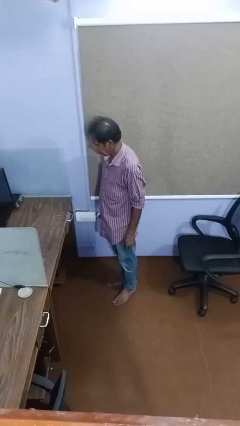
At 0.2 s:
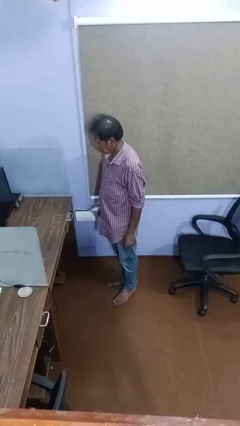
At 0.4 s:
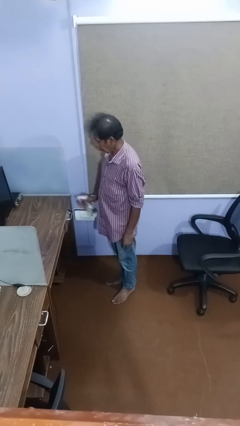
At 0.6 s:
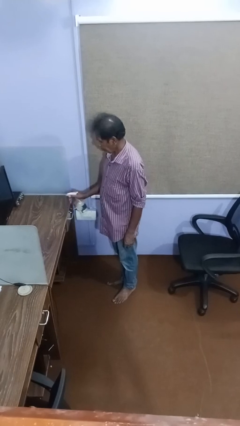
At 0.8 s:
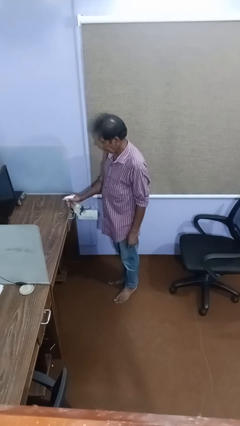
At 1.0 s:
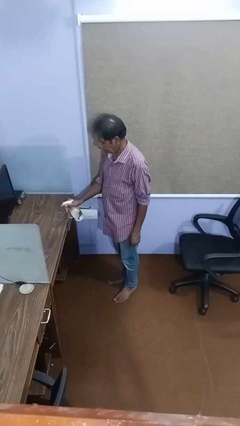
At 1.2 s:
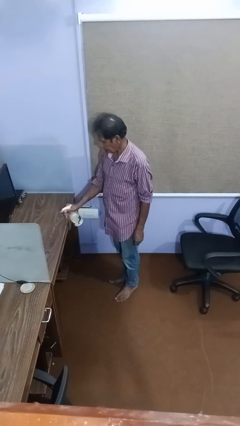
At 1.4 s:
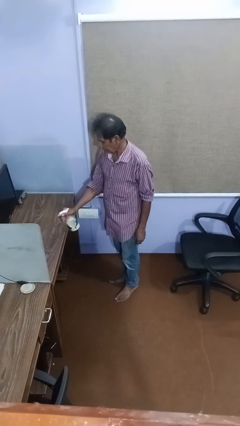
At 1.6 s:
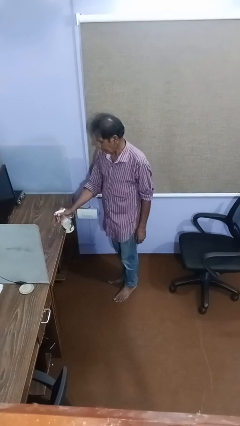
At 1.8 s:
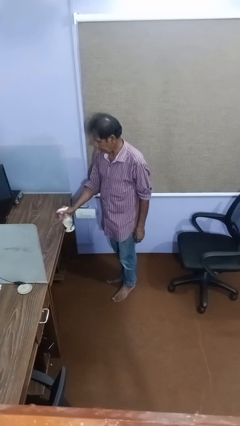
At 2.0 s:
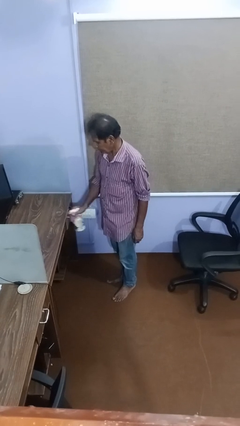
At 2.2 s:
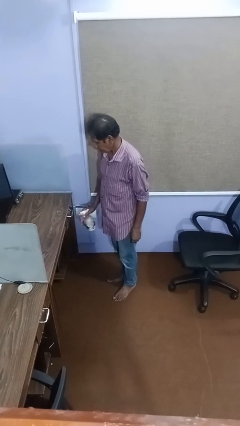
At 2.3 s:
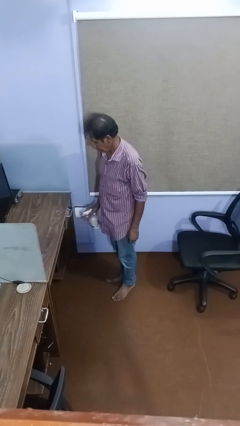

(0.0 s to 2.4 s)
person sprays from bottle

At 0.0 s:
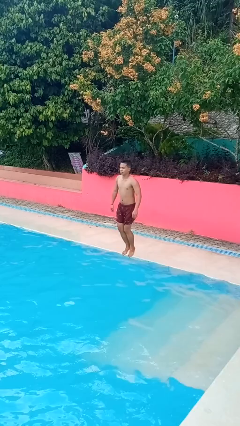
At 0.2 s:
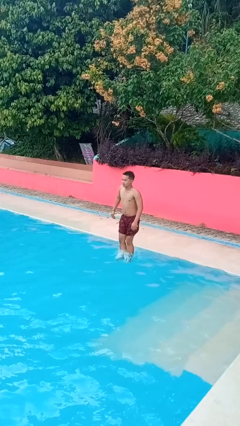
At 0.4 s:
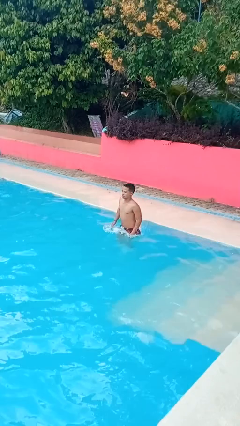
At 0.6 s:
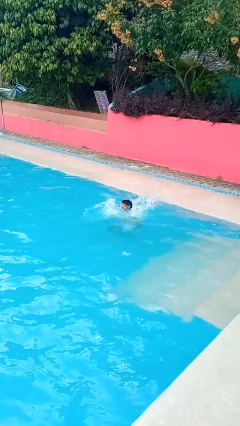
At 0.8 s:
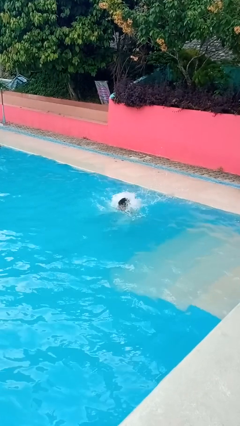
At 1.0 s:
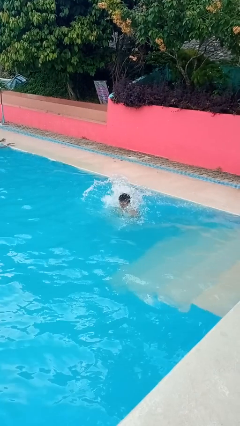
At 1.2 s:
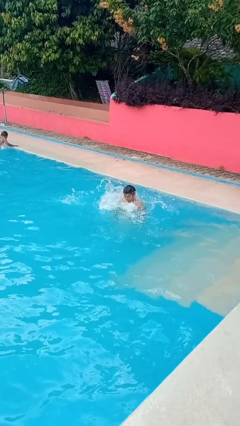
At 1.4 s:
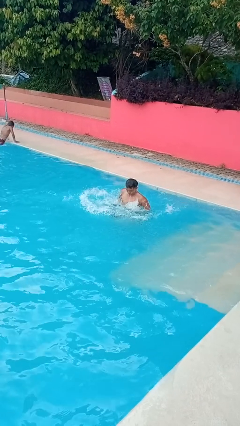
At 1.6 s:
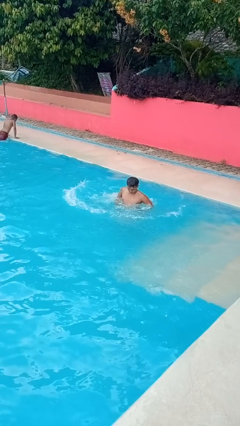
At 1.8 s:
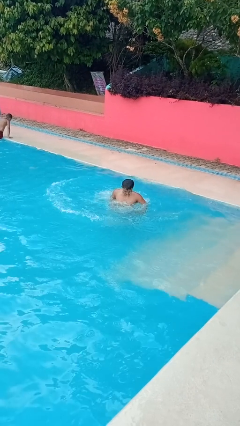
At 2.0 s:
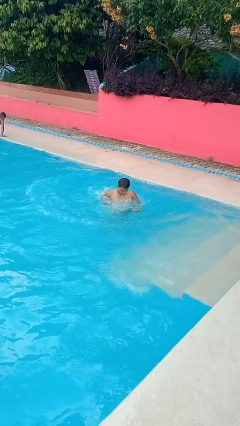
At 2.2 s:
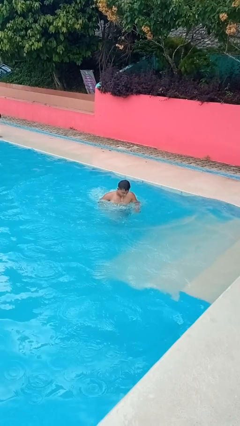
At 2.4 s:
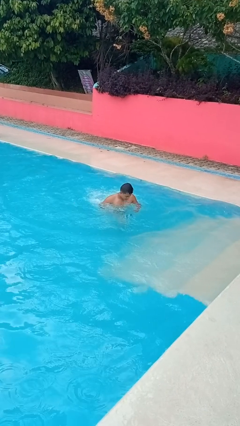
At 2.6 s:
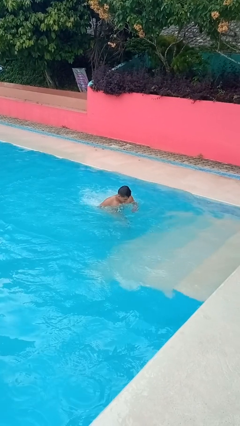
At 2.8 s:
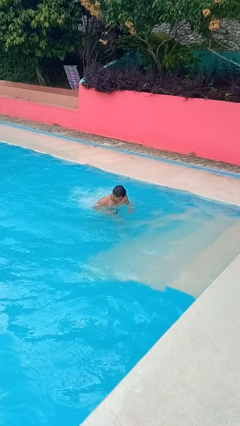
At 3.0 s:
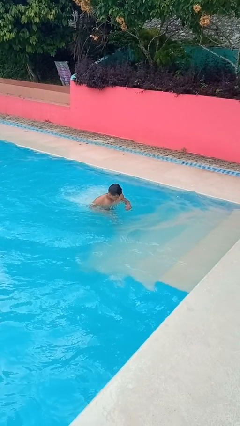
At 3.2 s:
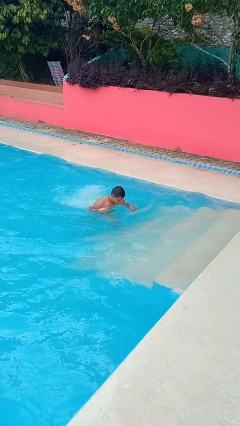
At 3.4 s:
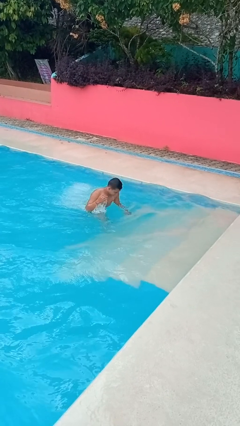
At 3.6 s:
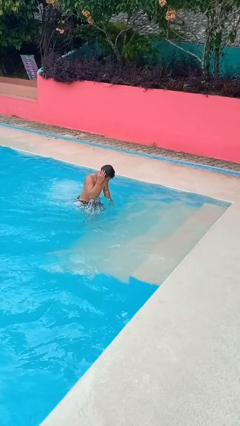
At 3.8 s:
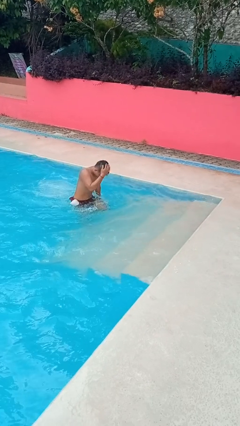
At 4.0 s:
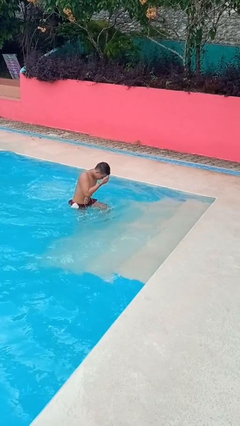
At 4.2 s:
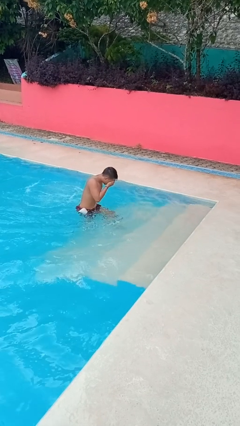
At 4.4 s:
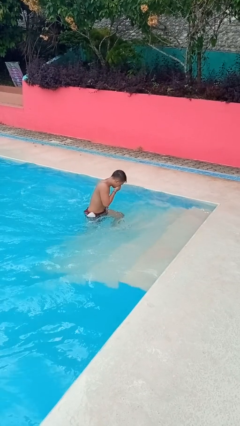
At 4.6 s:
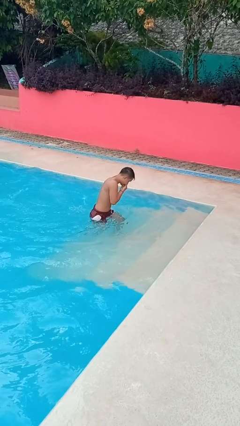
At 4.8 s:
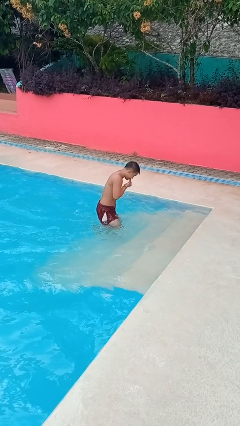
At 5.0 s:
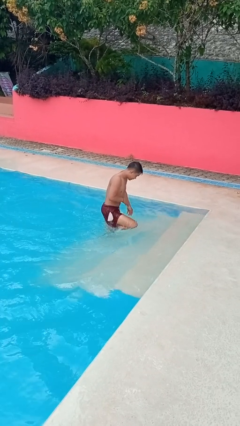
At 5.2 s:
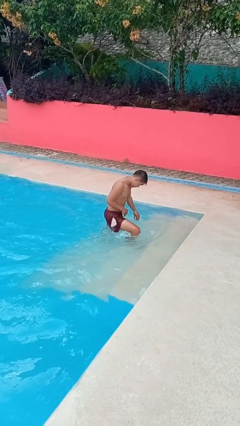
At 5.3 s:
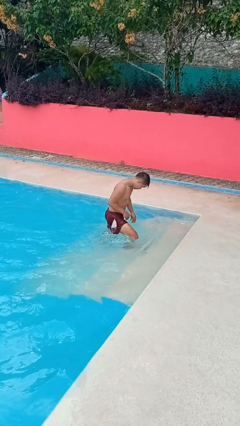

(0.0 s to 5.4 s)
person jumps into pool

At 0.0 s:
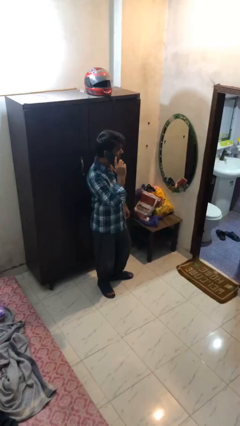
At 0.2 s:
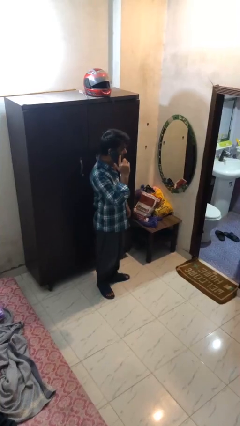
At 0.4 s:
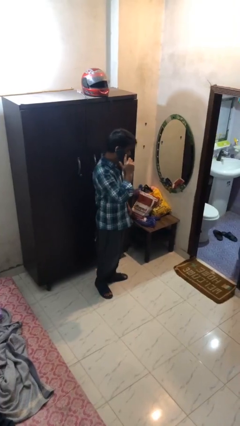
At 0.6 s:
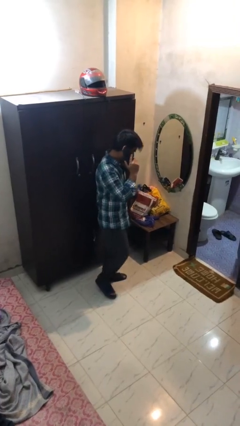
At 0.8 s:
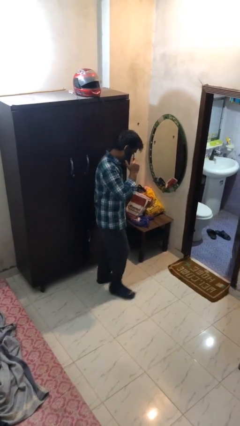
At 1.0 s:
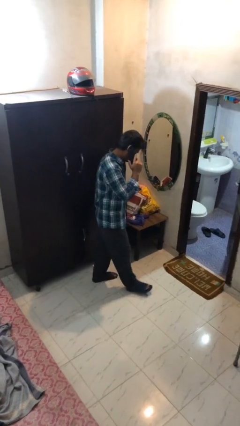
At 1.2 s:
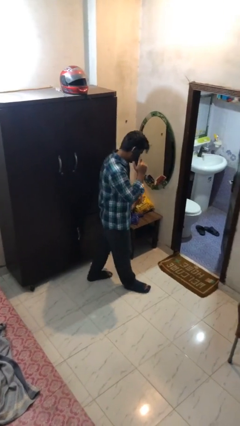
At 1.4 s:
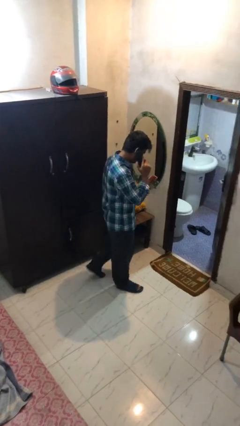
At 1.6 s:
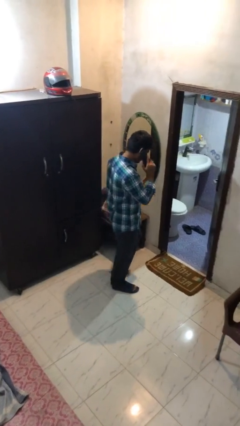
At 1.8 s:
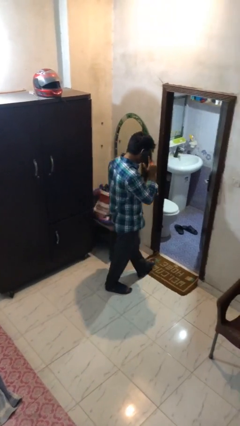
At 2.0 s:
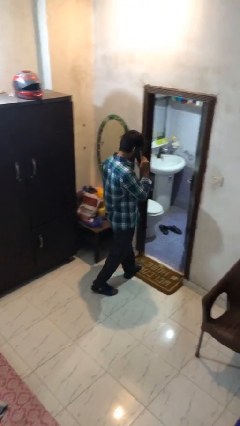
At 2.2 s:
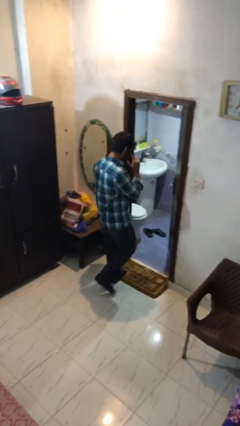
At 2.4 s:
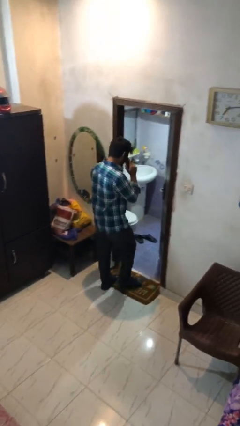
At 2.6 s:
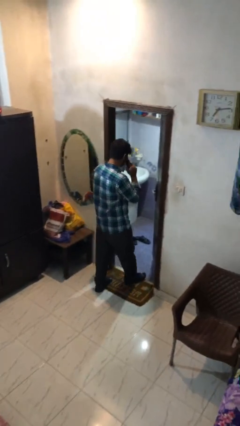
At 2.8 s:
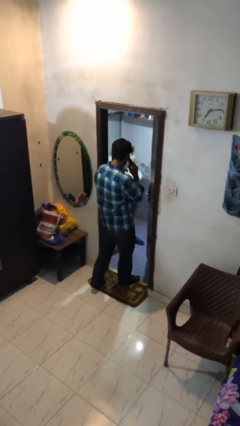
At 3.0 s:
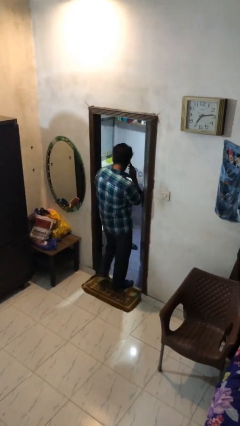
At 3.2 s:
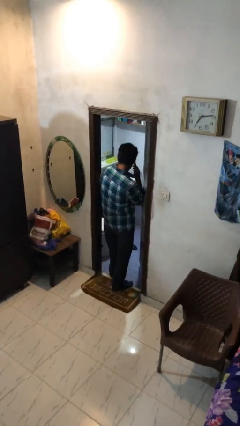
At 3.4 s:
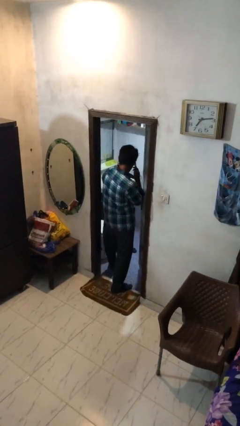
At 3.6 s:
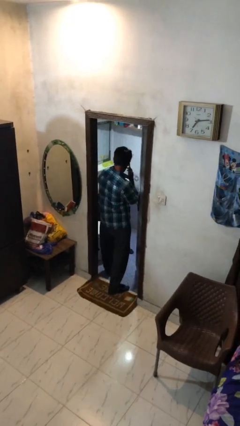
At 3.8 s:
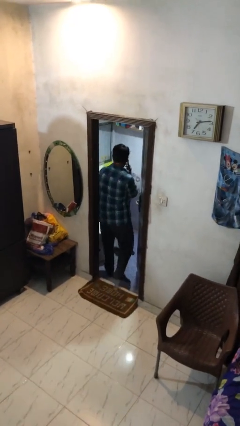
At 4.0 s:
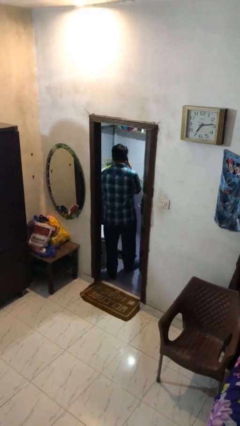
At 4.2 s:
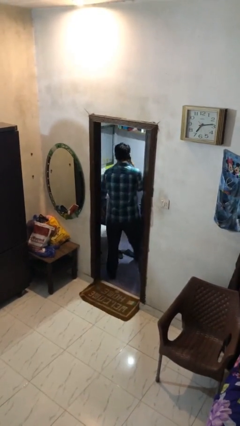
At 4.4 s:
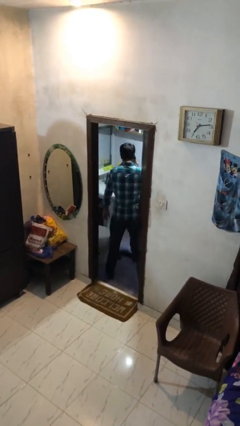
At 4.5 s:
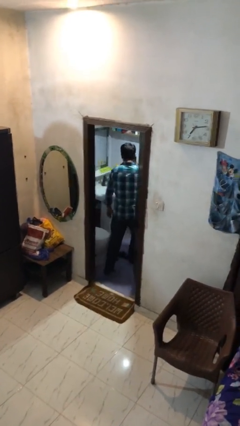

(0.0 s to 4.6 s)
person exits scene through structure

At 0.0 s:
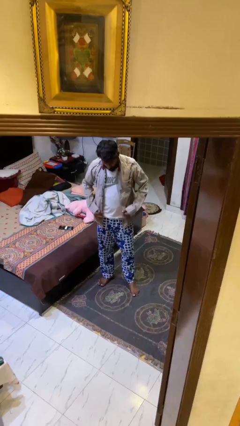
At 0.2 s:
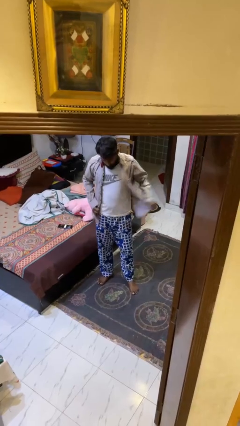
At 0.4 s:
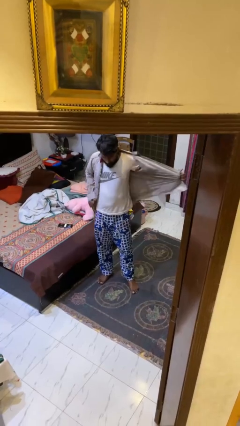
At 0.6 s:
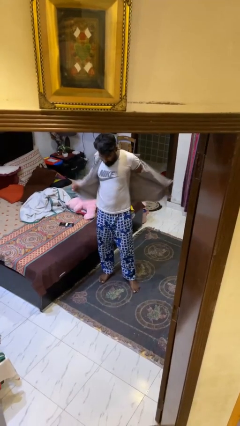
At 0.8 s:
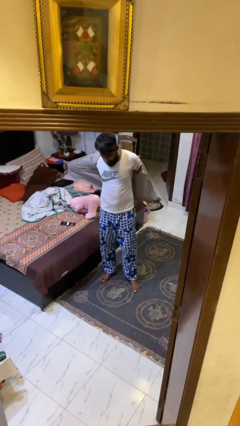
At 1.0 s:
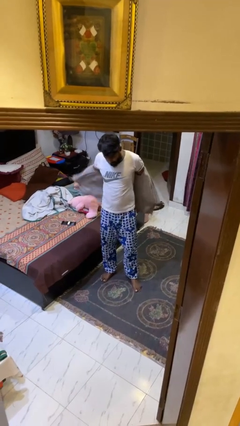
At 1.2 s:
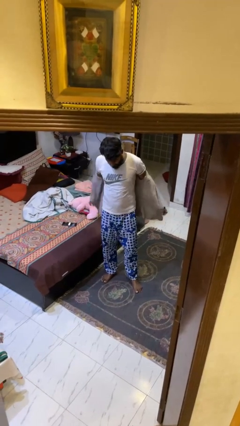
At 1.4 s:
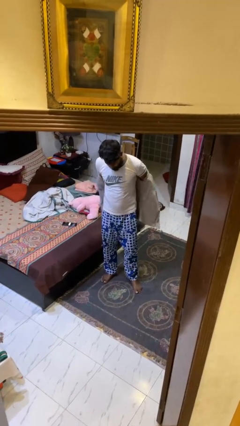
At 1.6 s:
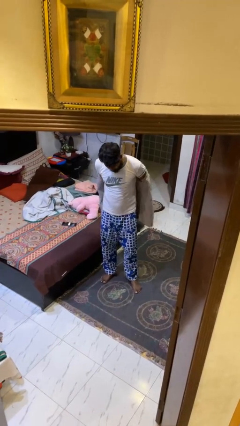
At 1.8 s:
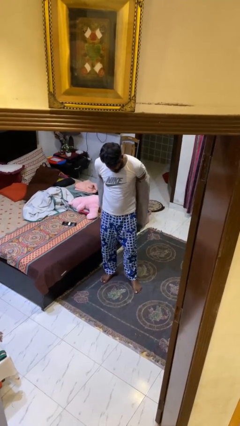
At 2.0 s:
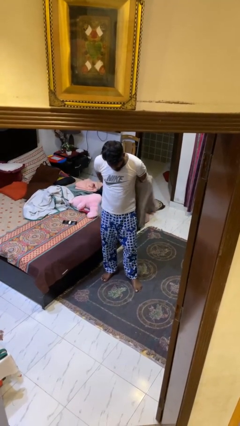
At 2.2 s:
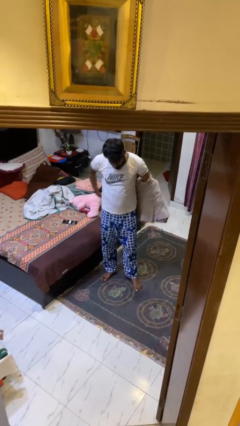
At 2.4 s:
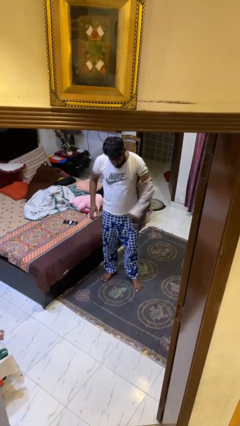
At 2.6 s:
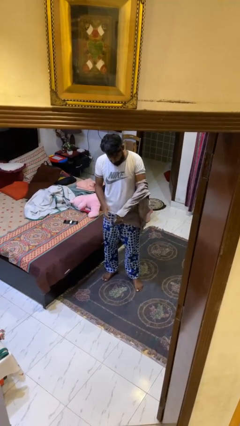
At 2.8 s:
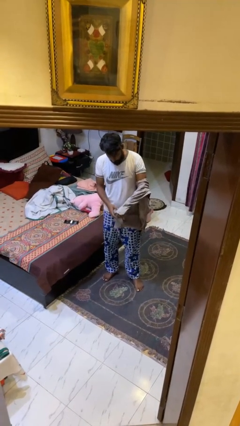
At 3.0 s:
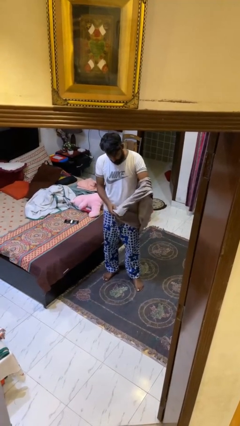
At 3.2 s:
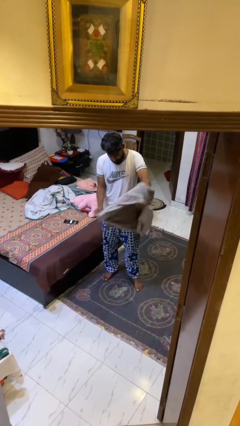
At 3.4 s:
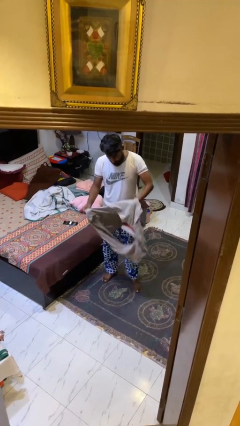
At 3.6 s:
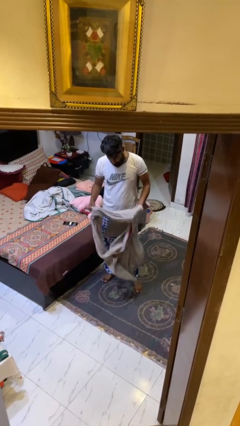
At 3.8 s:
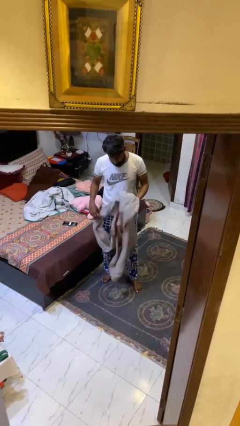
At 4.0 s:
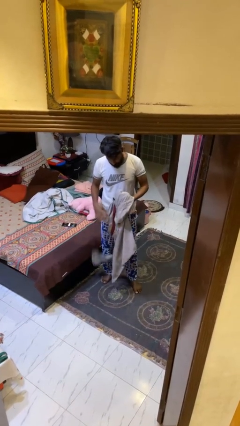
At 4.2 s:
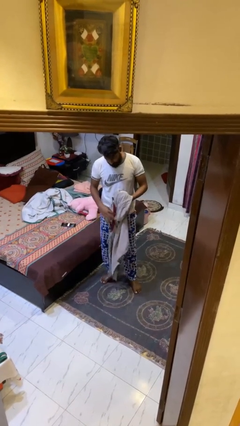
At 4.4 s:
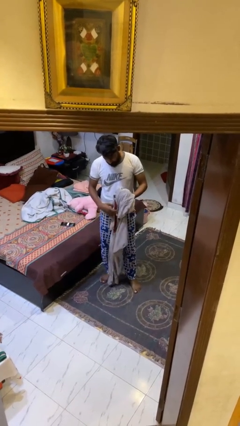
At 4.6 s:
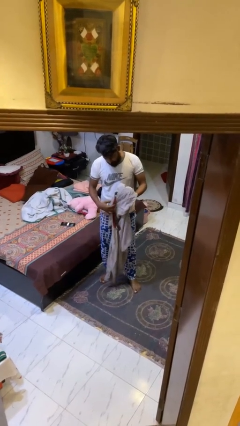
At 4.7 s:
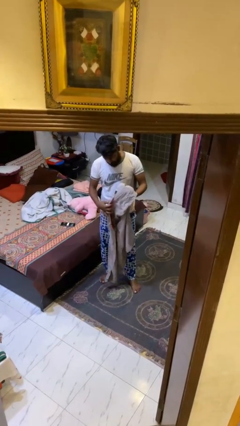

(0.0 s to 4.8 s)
person takes off shirt

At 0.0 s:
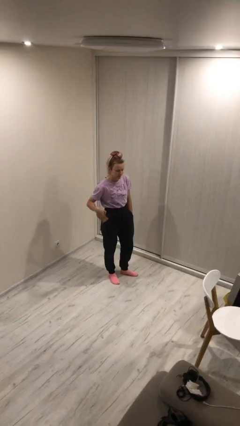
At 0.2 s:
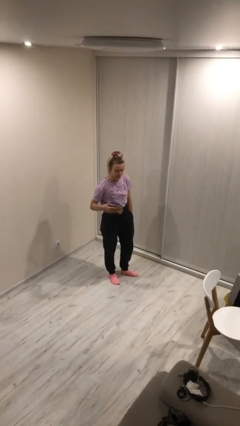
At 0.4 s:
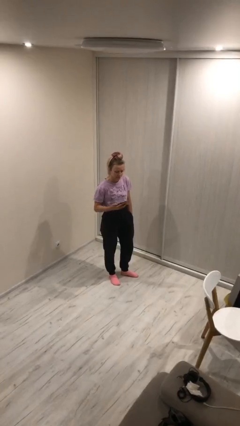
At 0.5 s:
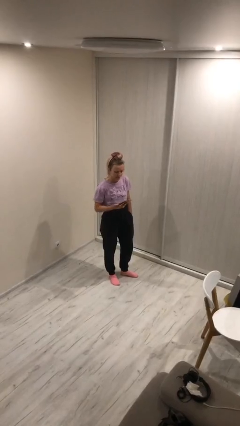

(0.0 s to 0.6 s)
person takes phone from pocket

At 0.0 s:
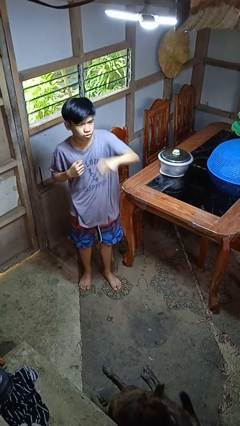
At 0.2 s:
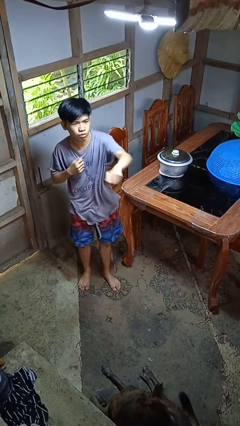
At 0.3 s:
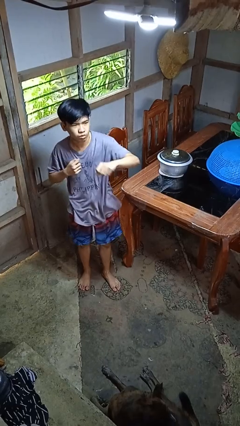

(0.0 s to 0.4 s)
person punches
